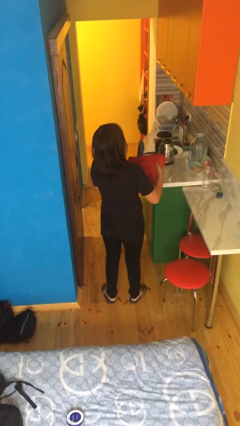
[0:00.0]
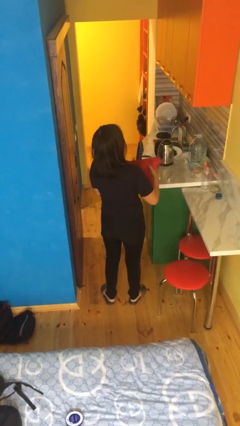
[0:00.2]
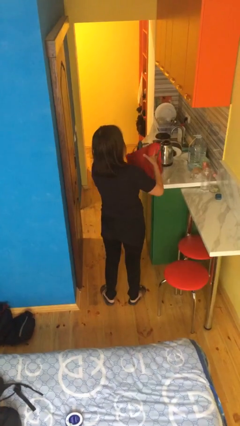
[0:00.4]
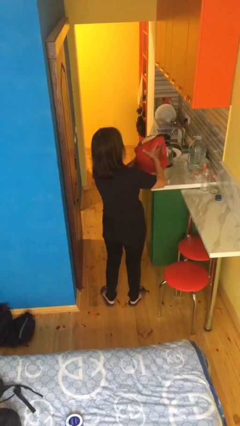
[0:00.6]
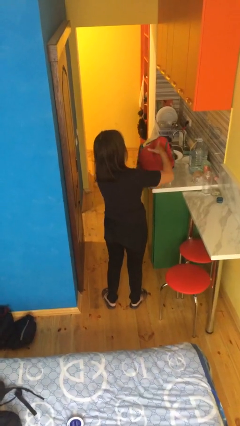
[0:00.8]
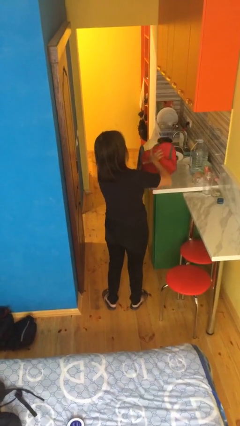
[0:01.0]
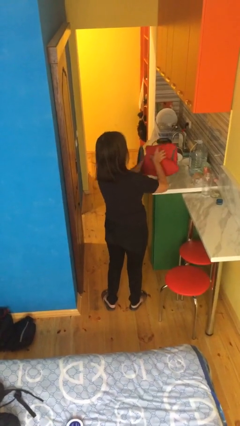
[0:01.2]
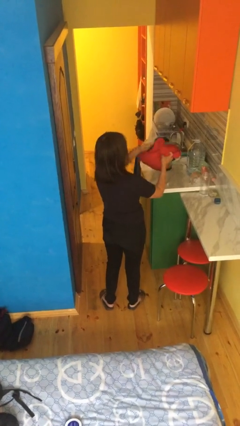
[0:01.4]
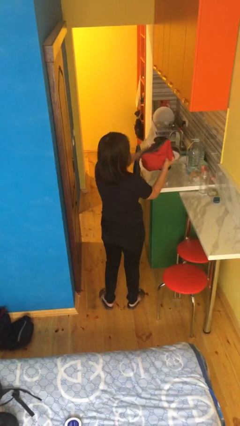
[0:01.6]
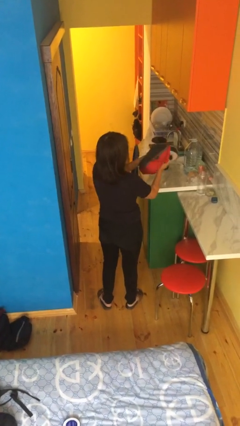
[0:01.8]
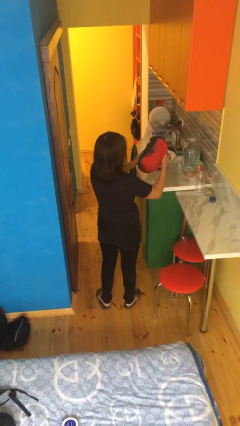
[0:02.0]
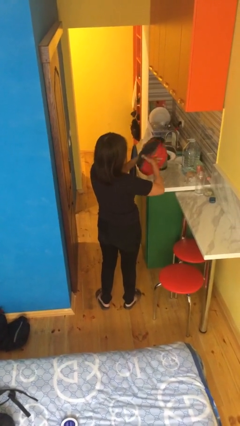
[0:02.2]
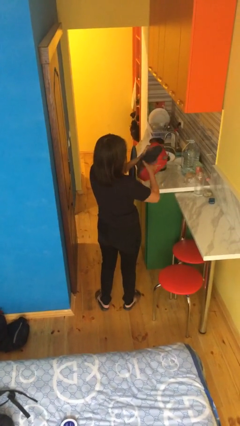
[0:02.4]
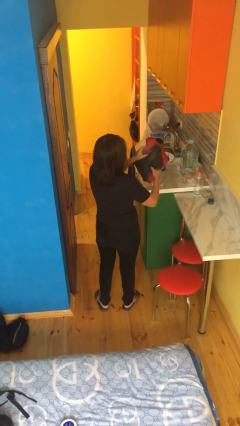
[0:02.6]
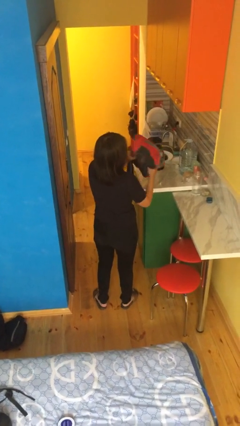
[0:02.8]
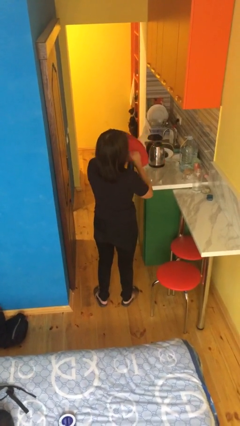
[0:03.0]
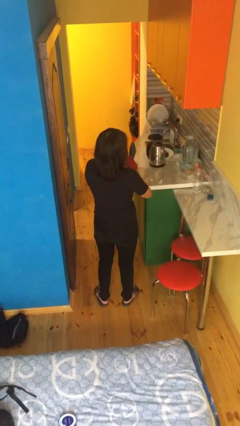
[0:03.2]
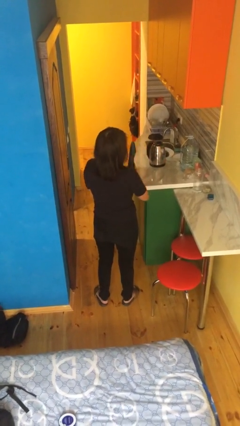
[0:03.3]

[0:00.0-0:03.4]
person squeezes object

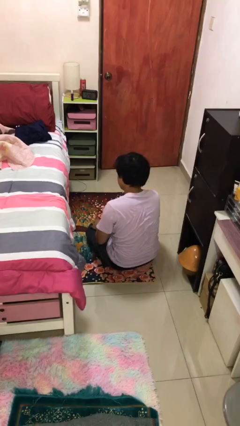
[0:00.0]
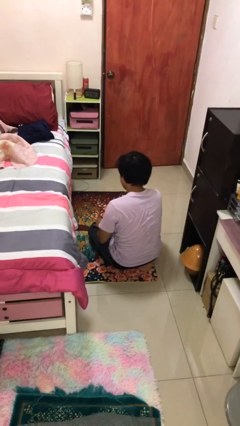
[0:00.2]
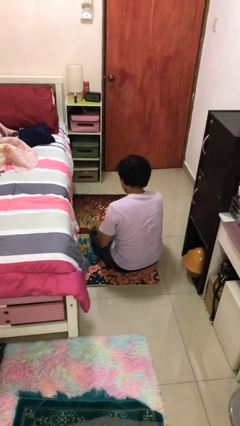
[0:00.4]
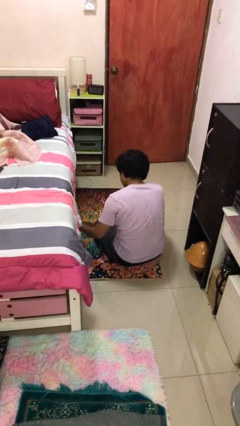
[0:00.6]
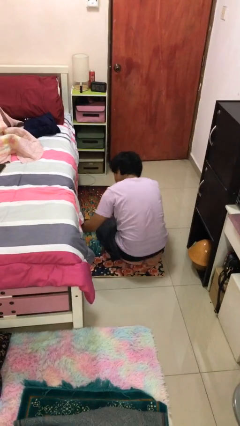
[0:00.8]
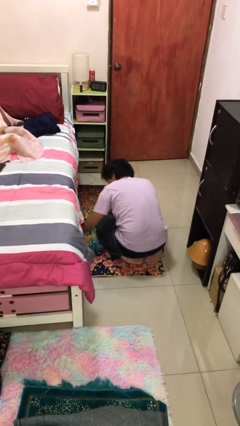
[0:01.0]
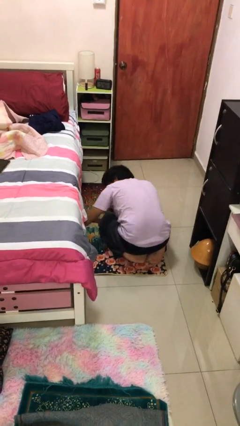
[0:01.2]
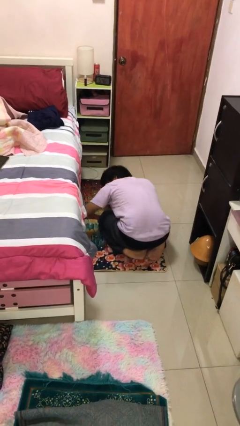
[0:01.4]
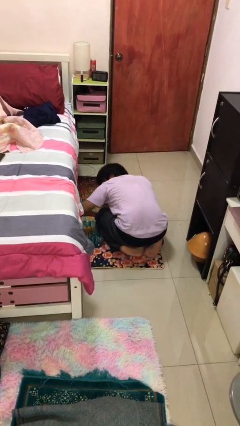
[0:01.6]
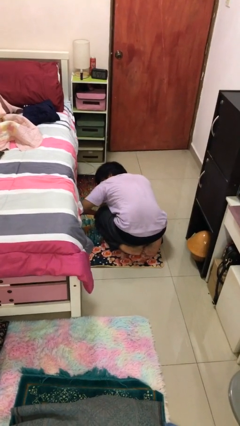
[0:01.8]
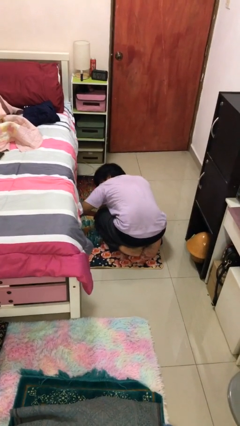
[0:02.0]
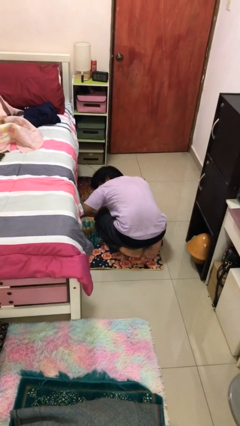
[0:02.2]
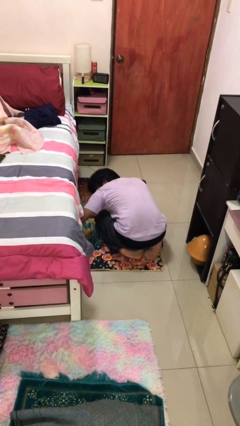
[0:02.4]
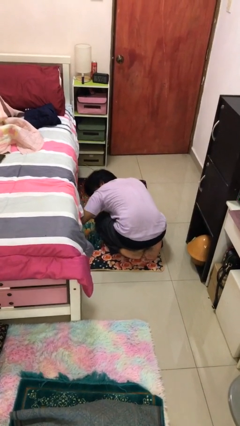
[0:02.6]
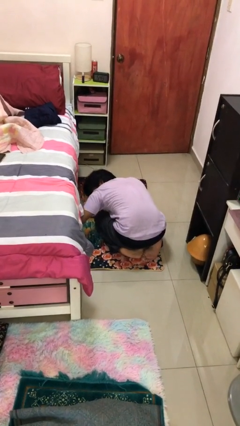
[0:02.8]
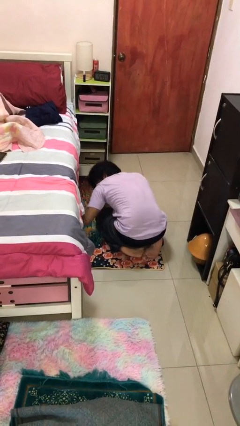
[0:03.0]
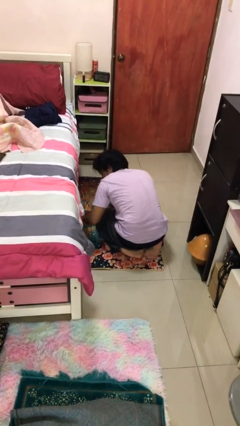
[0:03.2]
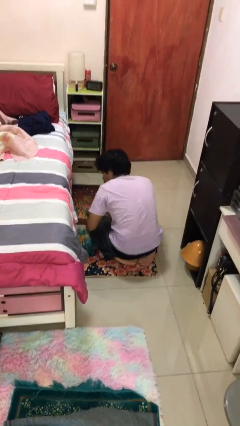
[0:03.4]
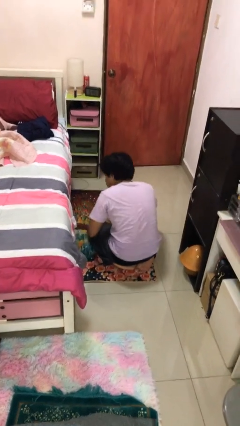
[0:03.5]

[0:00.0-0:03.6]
person searches under bed

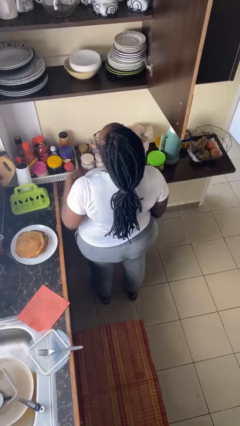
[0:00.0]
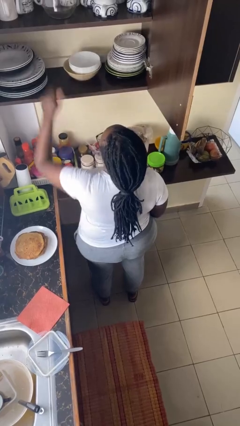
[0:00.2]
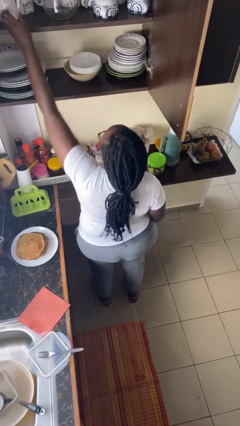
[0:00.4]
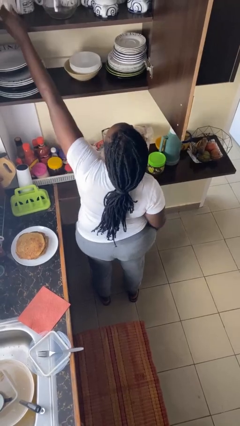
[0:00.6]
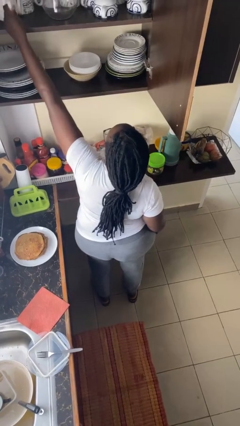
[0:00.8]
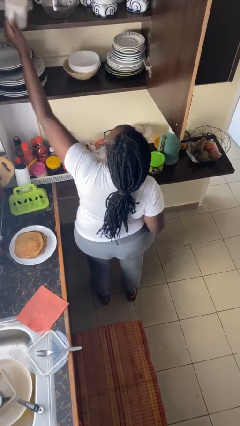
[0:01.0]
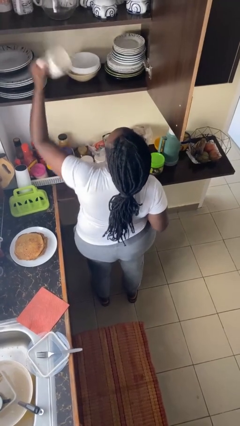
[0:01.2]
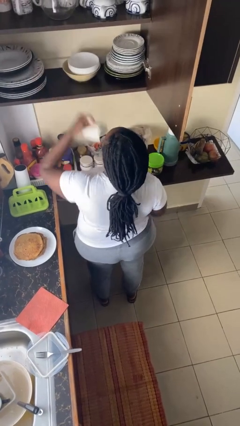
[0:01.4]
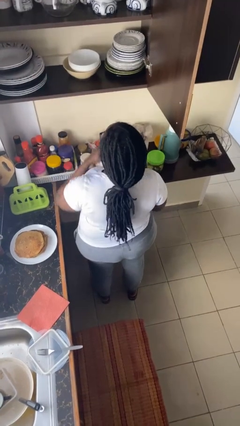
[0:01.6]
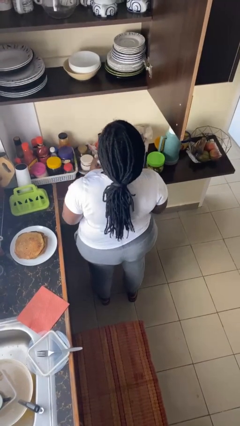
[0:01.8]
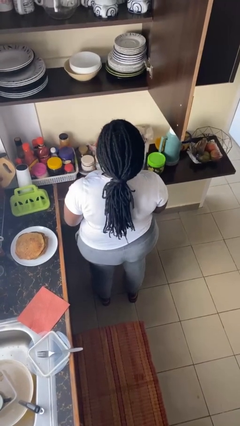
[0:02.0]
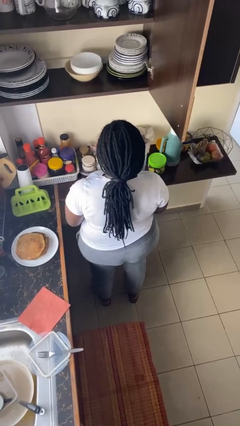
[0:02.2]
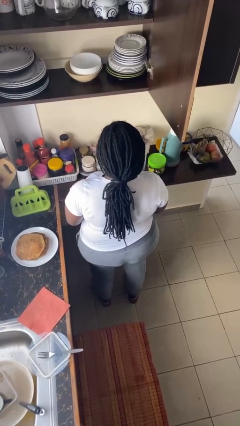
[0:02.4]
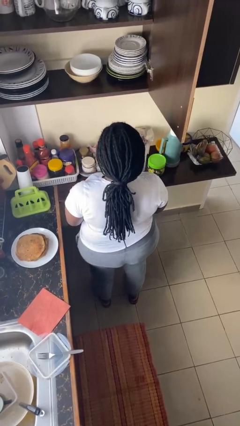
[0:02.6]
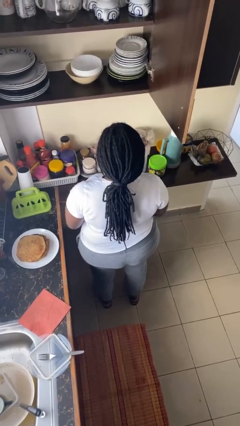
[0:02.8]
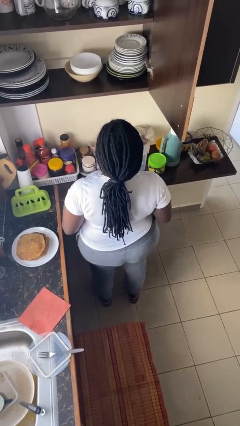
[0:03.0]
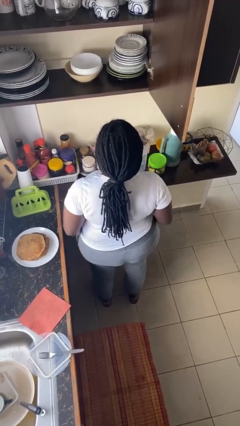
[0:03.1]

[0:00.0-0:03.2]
person takes object from cabinet

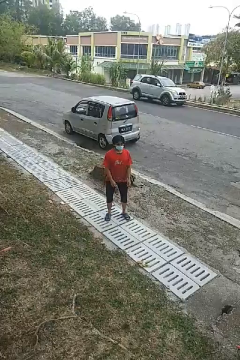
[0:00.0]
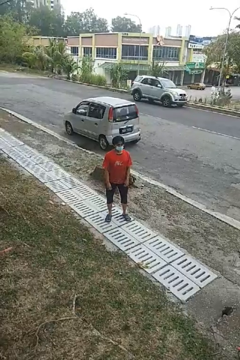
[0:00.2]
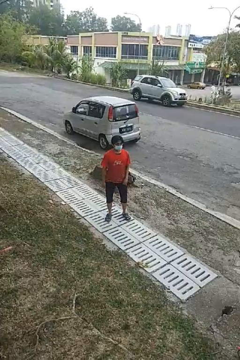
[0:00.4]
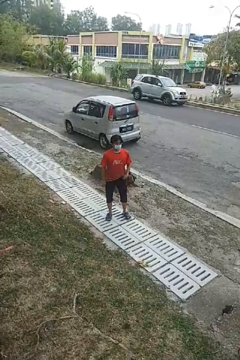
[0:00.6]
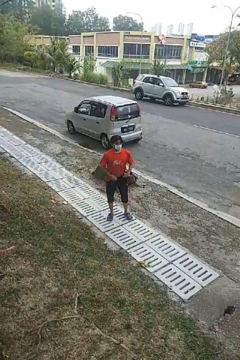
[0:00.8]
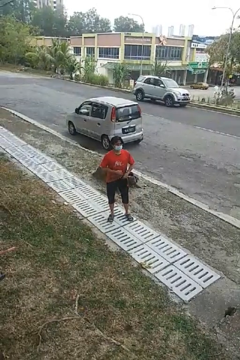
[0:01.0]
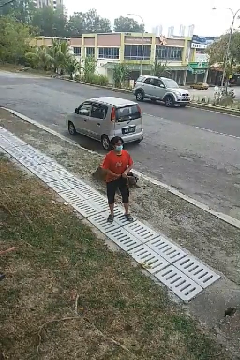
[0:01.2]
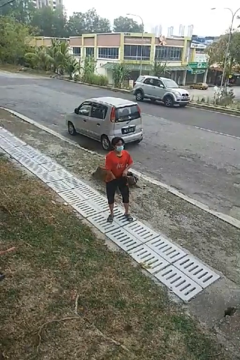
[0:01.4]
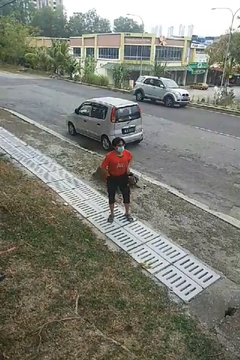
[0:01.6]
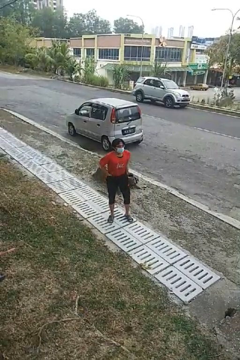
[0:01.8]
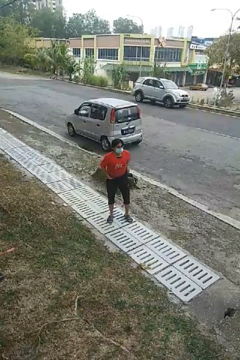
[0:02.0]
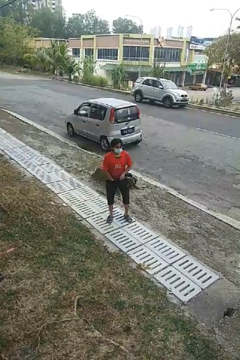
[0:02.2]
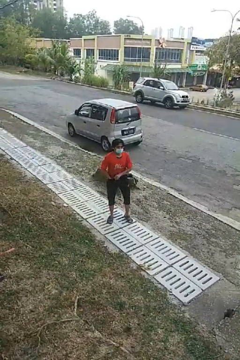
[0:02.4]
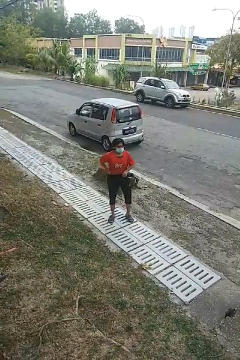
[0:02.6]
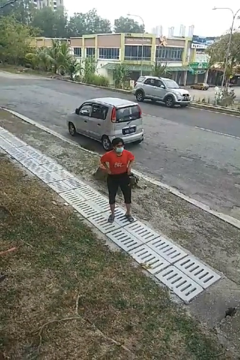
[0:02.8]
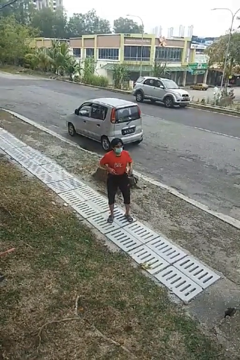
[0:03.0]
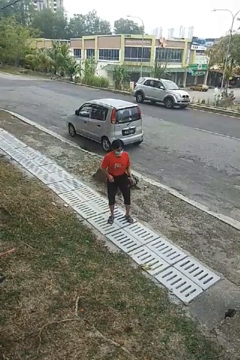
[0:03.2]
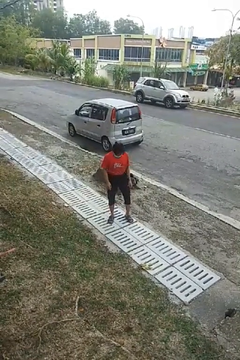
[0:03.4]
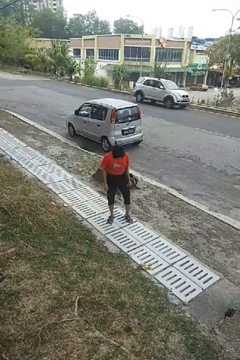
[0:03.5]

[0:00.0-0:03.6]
person tucks in shirt

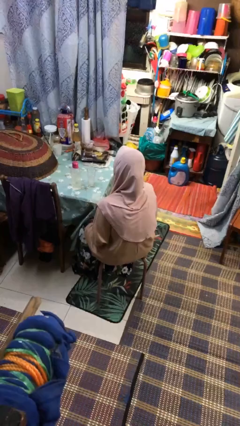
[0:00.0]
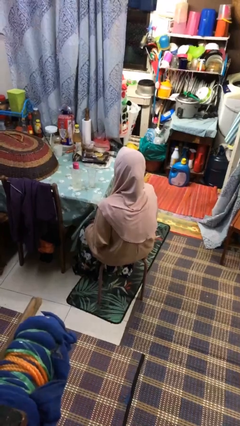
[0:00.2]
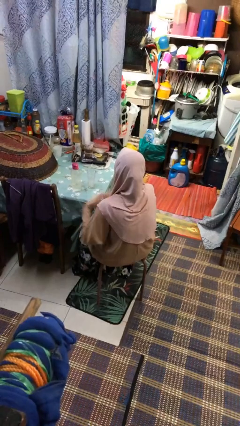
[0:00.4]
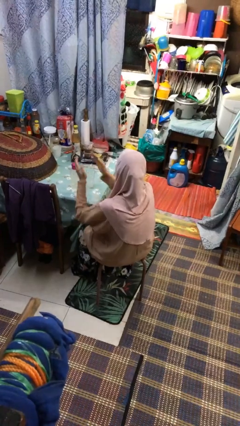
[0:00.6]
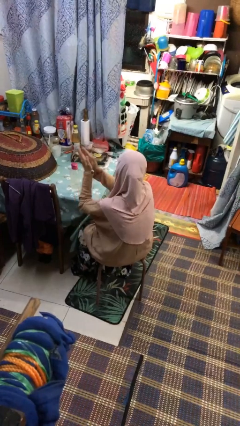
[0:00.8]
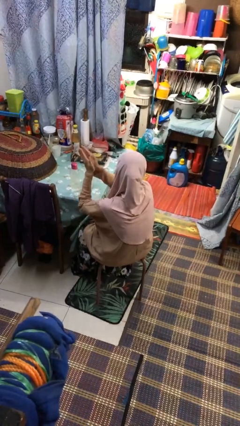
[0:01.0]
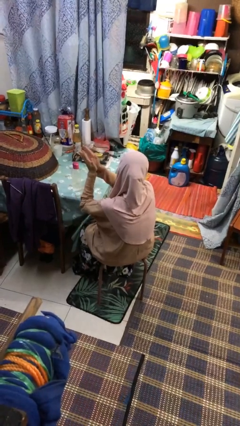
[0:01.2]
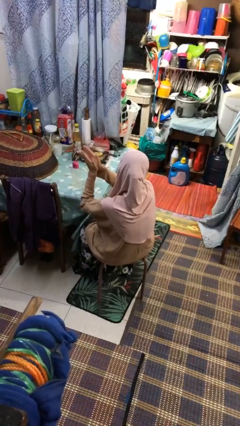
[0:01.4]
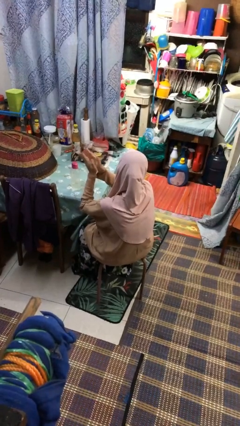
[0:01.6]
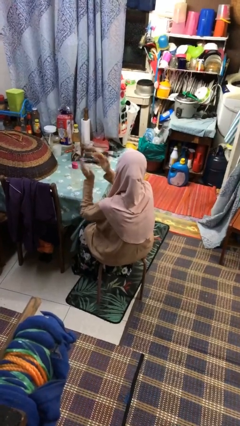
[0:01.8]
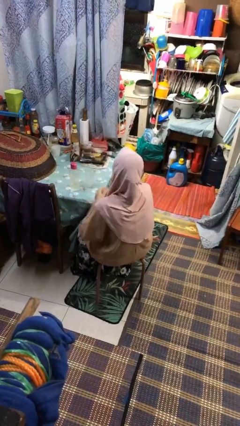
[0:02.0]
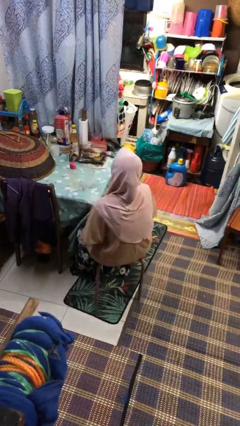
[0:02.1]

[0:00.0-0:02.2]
person claps hands

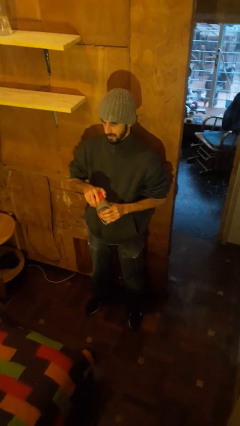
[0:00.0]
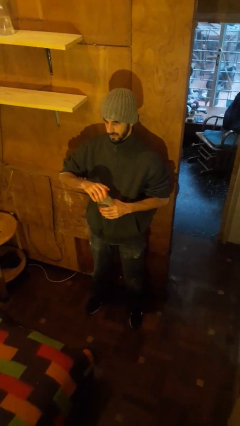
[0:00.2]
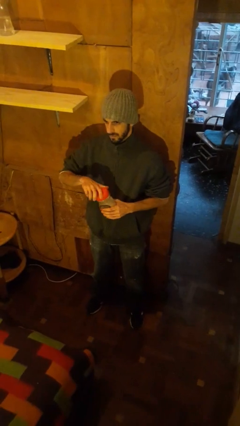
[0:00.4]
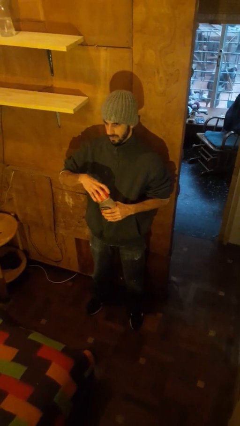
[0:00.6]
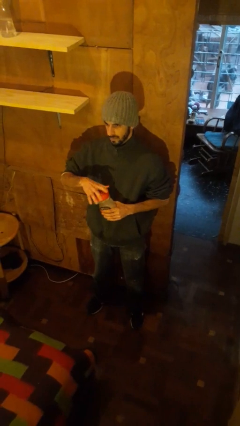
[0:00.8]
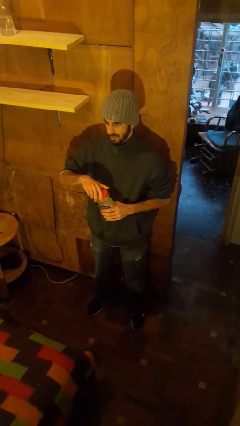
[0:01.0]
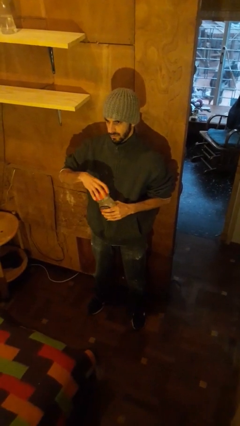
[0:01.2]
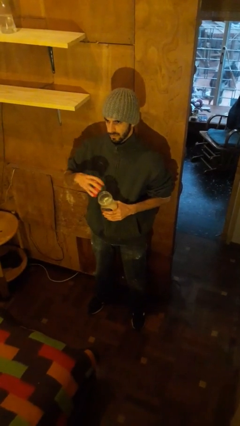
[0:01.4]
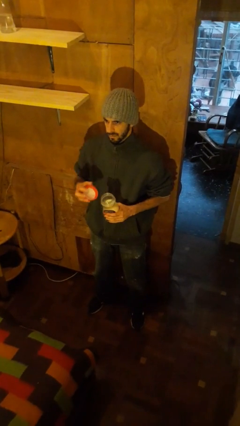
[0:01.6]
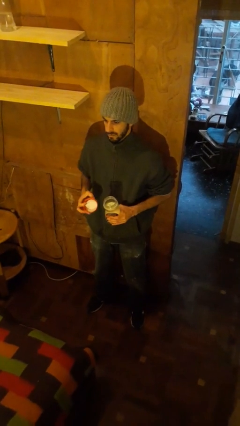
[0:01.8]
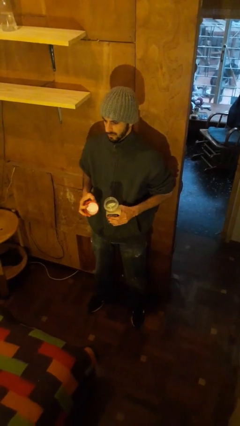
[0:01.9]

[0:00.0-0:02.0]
person opens jar
